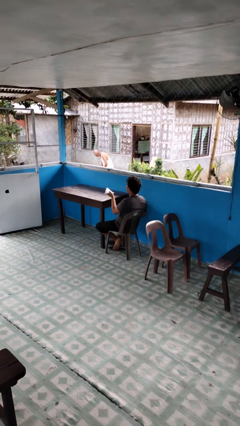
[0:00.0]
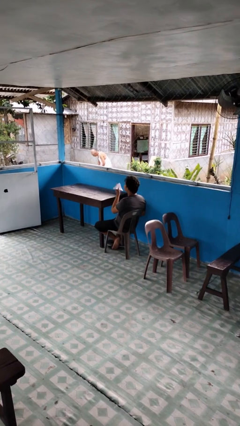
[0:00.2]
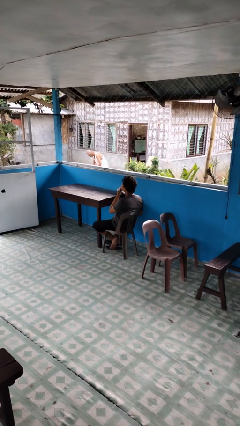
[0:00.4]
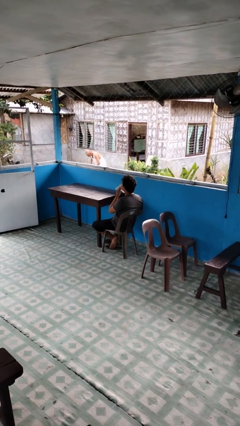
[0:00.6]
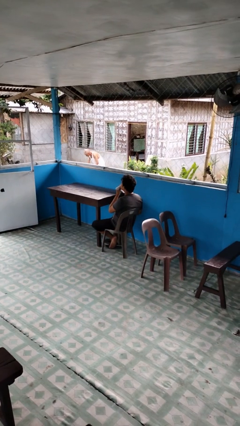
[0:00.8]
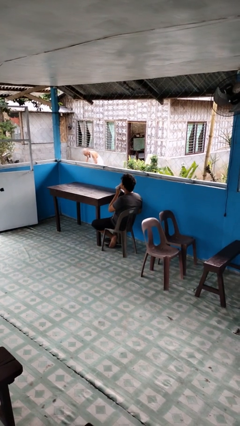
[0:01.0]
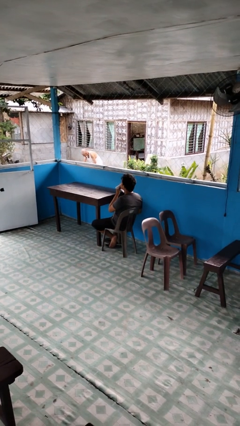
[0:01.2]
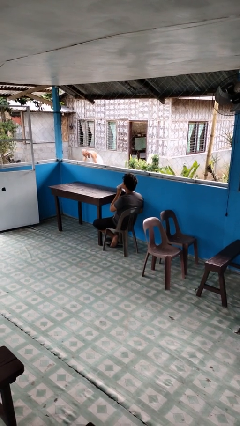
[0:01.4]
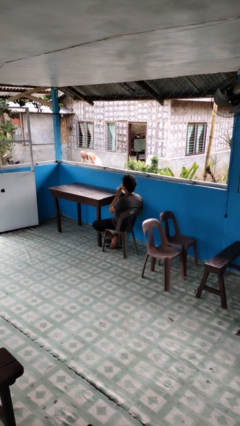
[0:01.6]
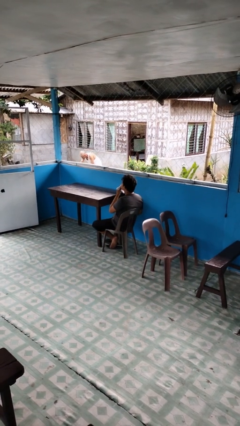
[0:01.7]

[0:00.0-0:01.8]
person wipes mouth with napkin

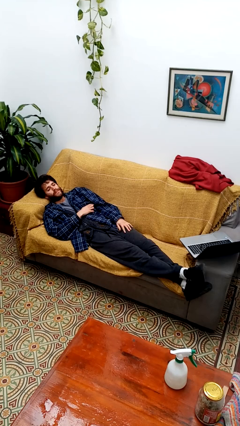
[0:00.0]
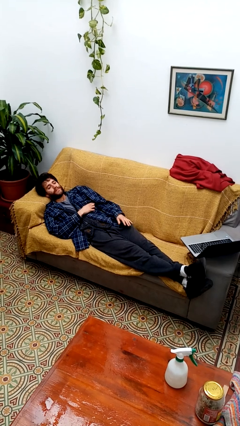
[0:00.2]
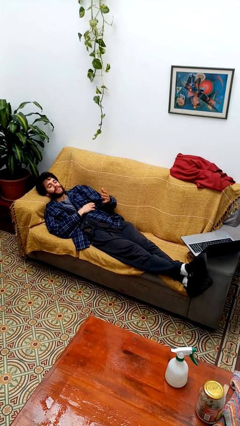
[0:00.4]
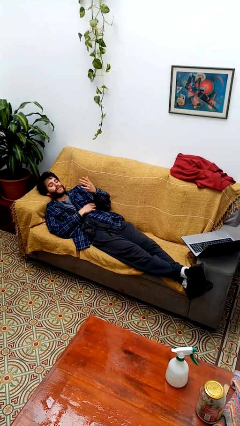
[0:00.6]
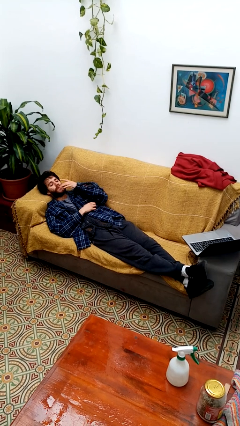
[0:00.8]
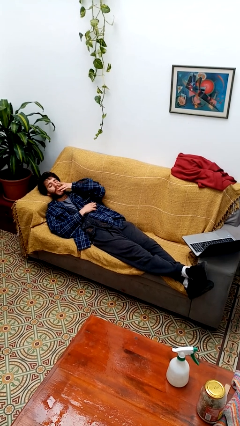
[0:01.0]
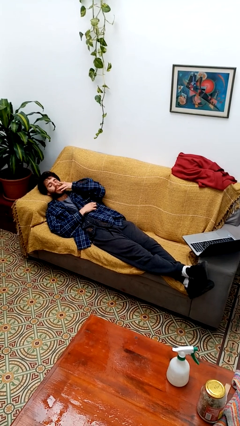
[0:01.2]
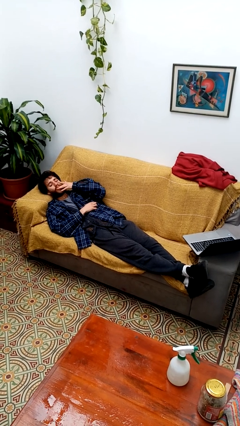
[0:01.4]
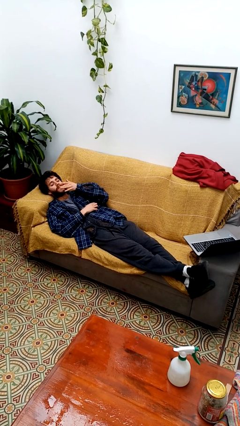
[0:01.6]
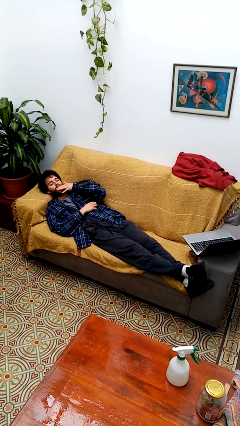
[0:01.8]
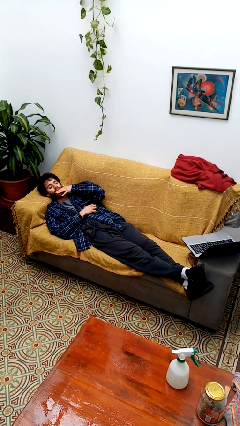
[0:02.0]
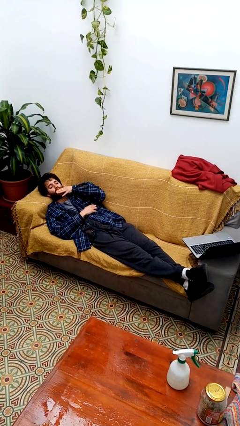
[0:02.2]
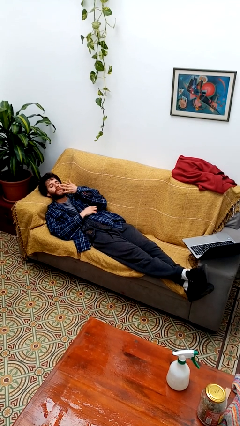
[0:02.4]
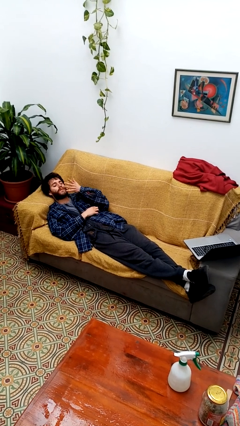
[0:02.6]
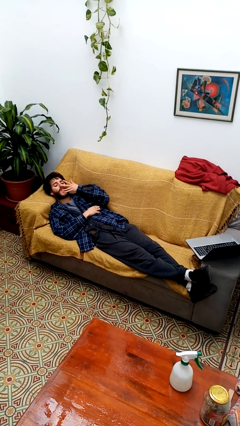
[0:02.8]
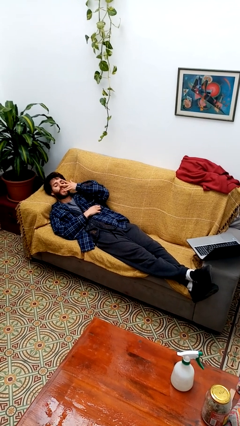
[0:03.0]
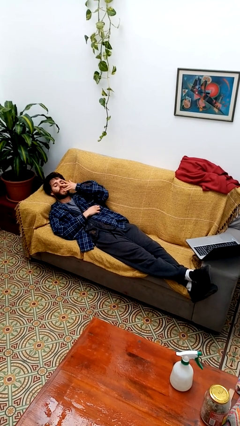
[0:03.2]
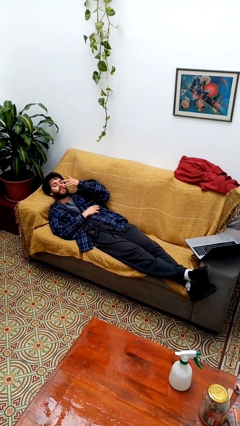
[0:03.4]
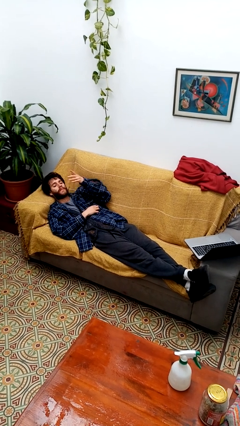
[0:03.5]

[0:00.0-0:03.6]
person licks fingers

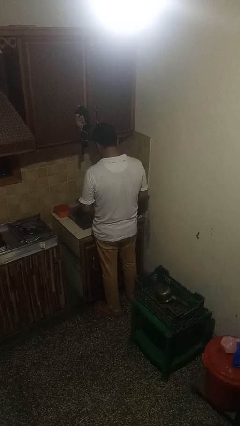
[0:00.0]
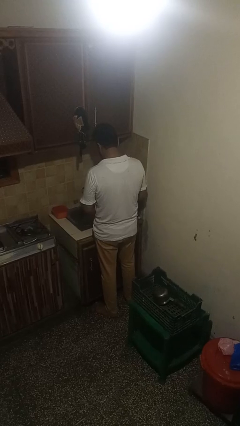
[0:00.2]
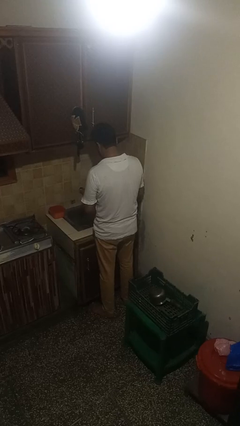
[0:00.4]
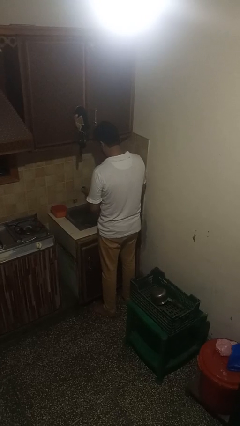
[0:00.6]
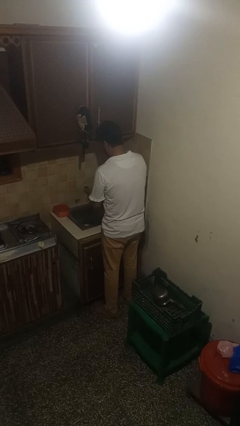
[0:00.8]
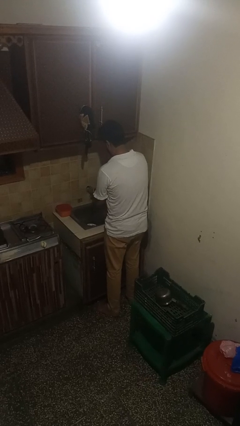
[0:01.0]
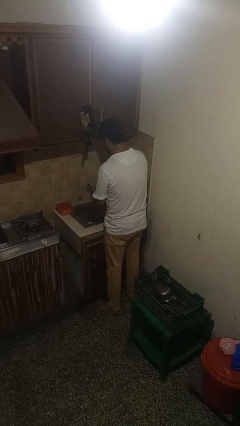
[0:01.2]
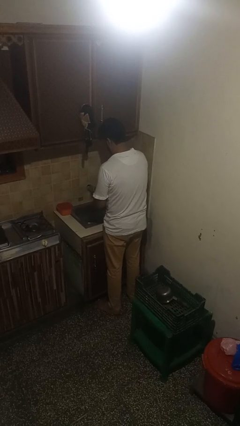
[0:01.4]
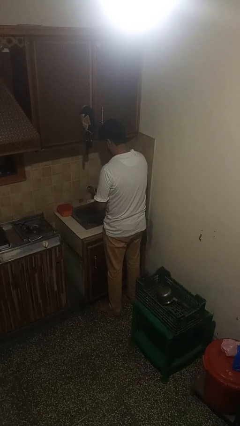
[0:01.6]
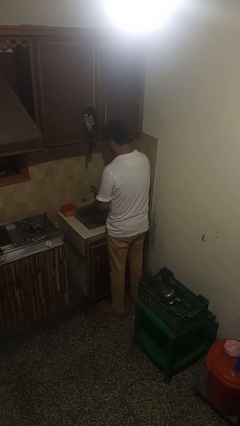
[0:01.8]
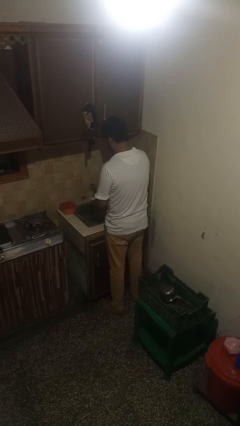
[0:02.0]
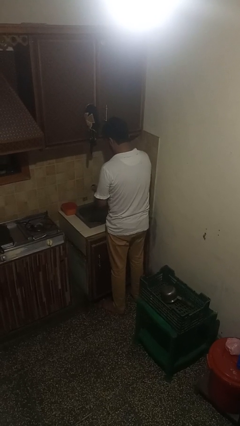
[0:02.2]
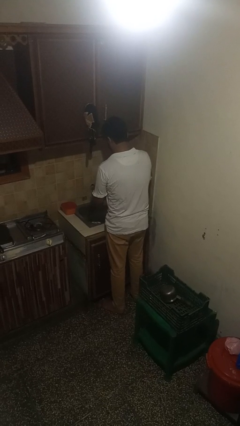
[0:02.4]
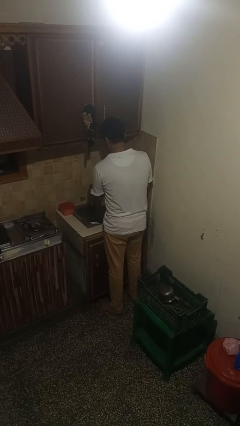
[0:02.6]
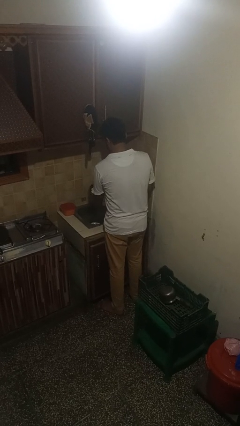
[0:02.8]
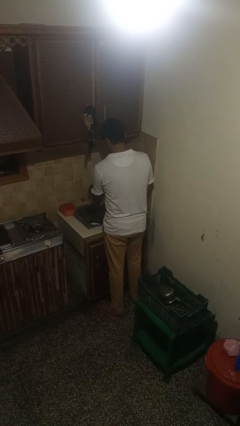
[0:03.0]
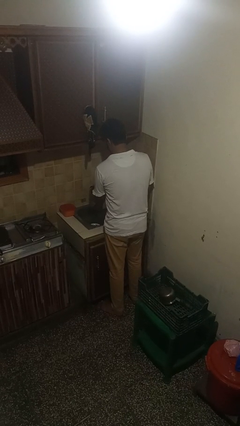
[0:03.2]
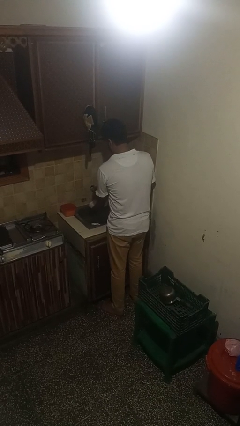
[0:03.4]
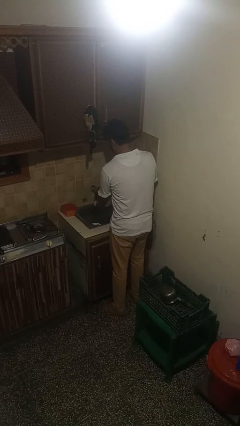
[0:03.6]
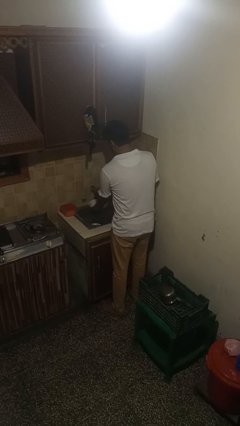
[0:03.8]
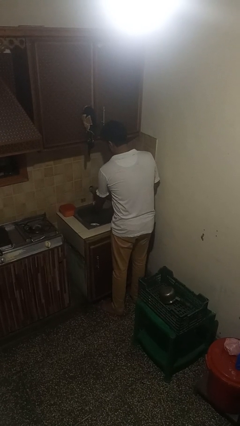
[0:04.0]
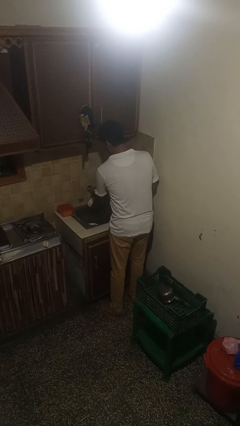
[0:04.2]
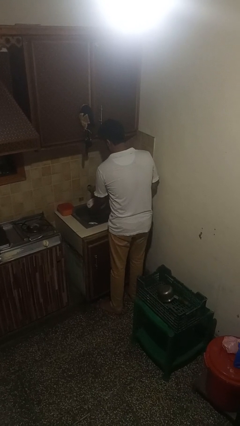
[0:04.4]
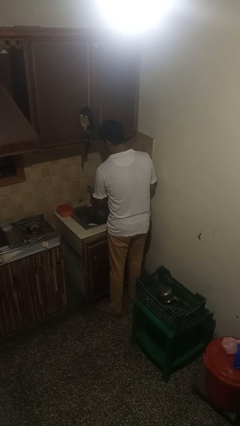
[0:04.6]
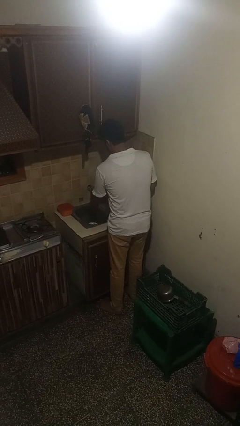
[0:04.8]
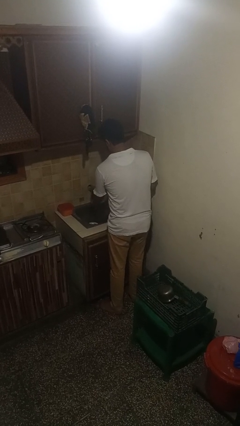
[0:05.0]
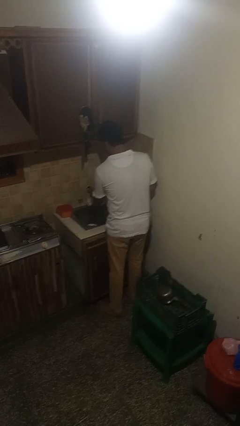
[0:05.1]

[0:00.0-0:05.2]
person washes dish

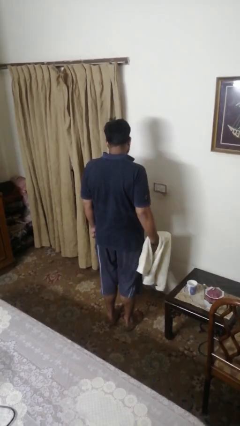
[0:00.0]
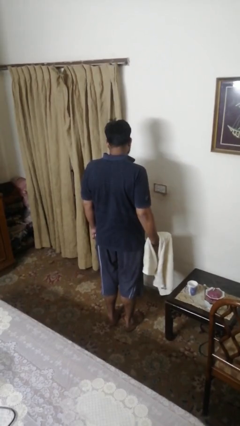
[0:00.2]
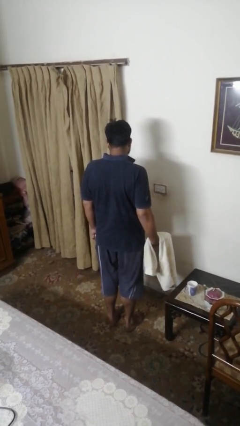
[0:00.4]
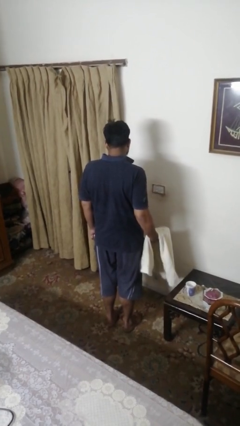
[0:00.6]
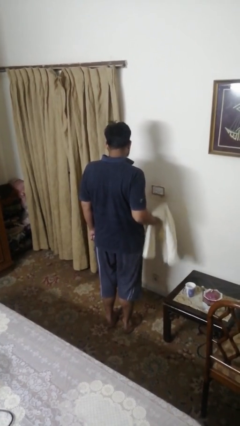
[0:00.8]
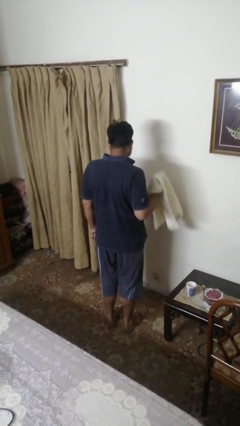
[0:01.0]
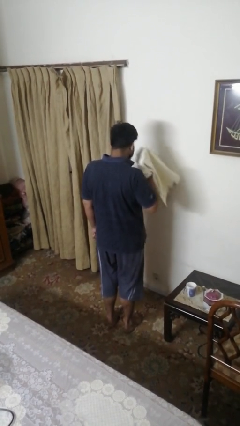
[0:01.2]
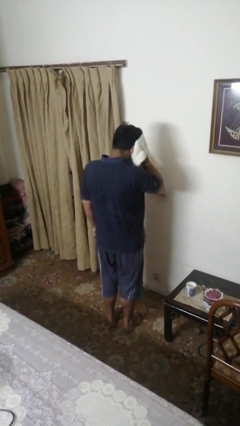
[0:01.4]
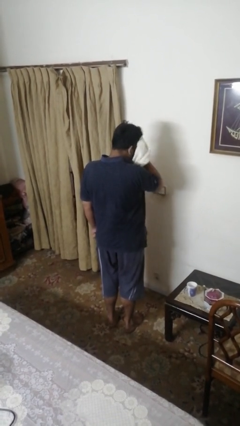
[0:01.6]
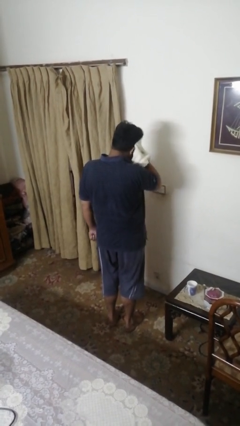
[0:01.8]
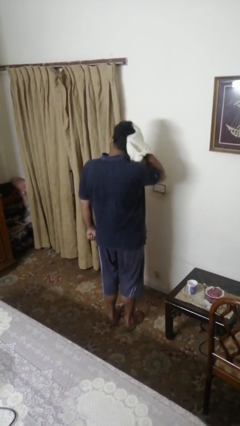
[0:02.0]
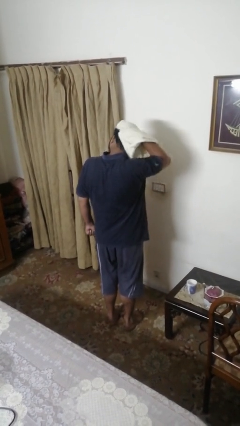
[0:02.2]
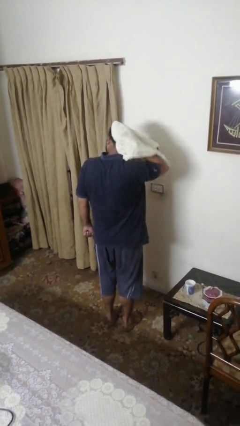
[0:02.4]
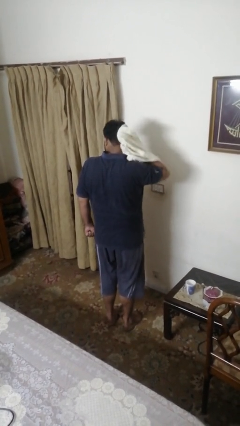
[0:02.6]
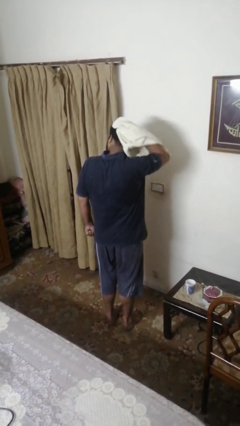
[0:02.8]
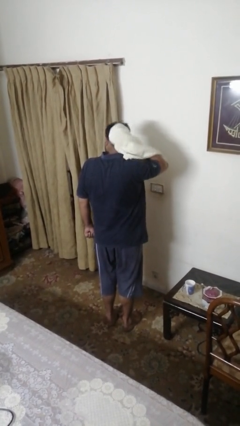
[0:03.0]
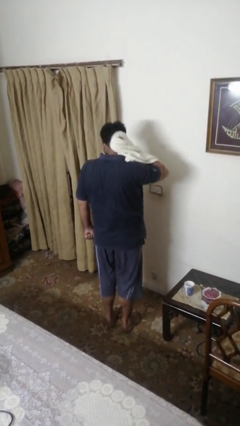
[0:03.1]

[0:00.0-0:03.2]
person dries hair with towel

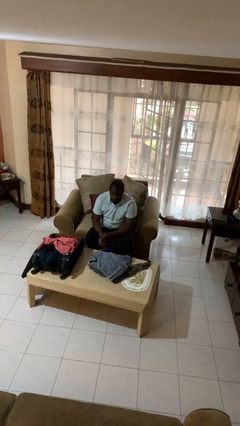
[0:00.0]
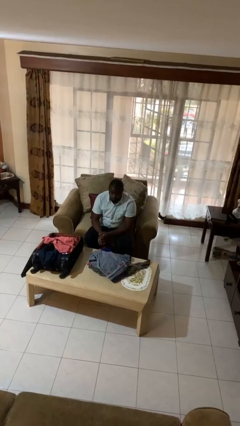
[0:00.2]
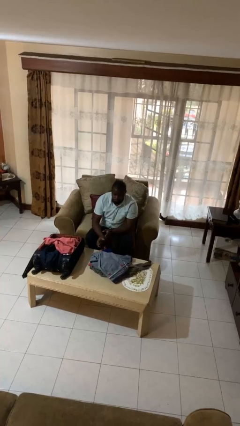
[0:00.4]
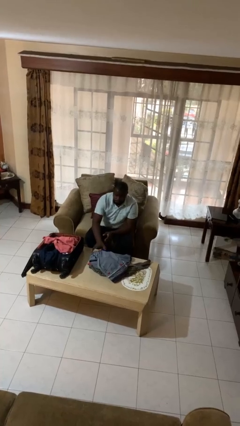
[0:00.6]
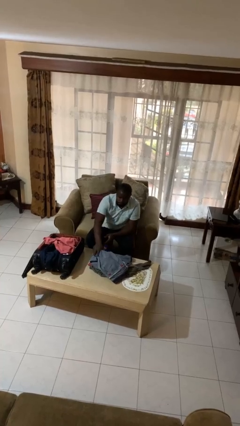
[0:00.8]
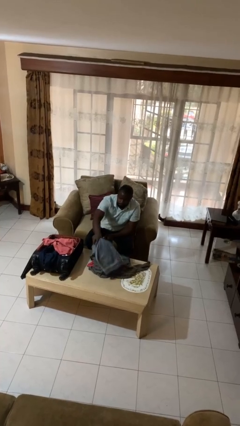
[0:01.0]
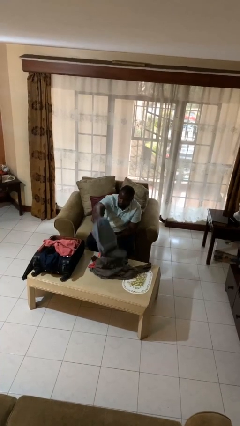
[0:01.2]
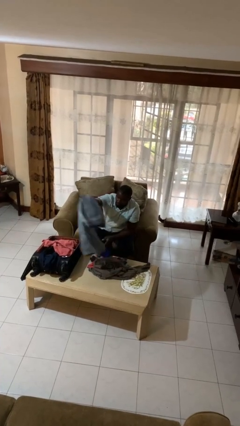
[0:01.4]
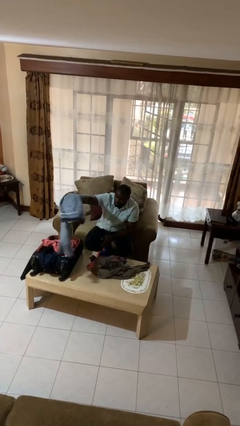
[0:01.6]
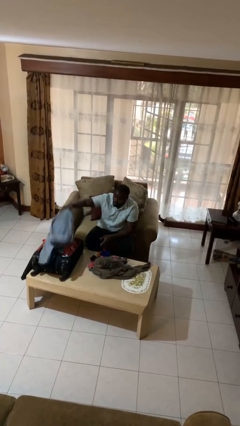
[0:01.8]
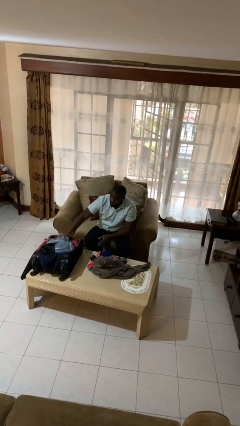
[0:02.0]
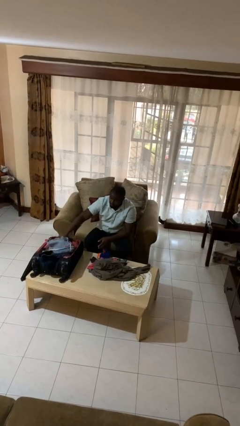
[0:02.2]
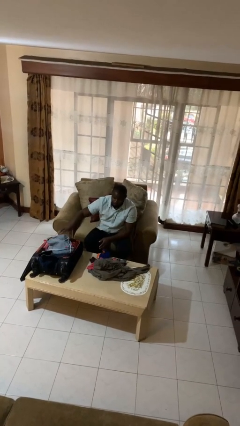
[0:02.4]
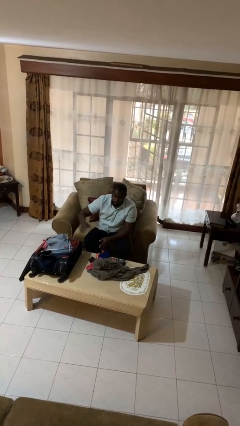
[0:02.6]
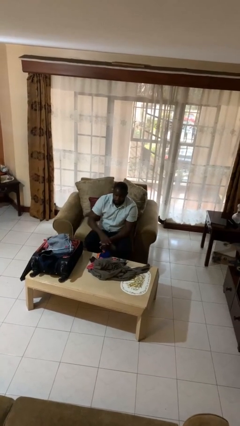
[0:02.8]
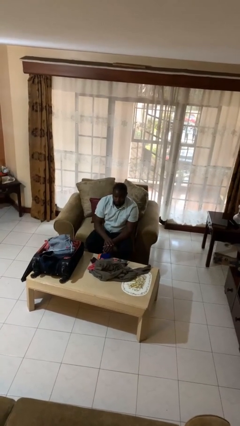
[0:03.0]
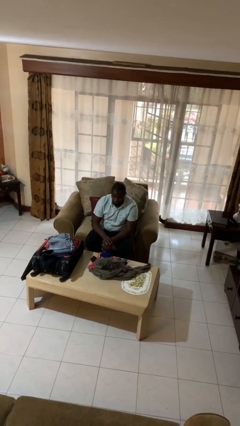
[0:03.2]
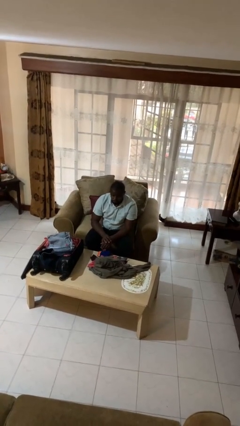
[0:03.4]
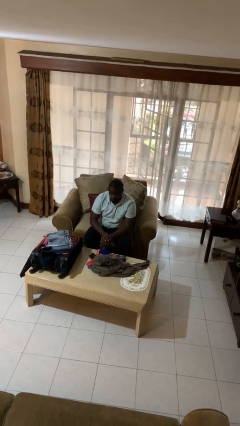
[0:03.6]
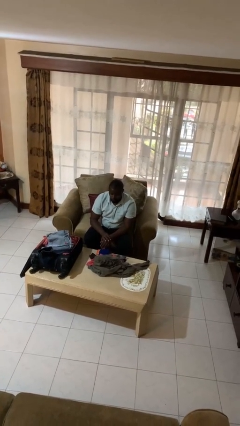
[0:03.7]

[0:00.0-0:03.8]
person loads clothes into suitcase

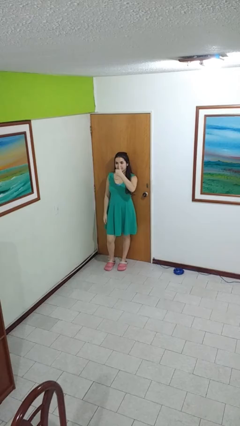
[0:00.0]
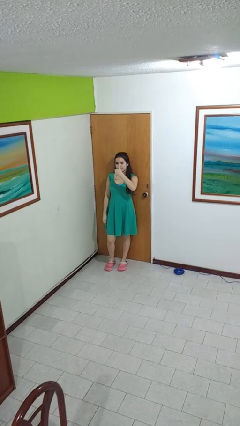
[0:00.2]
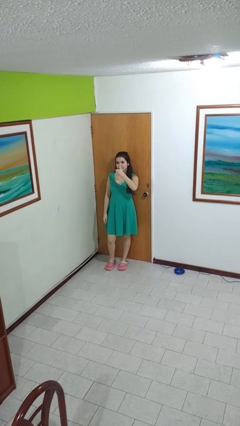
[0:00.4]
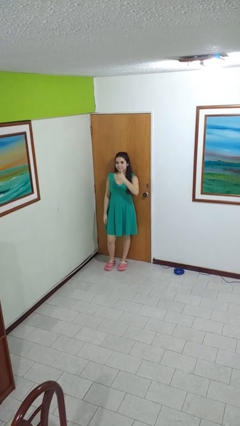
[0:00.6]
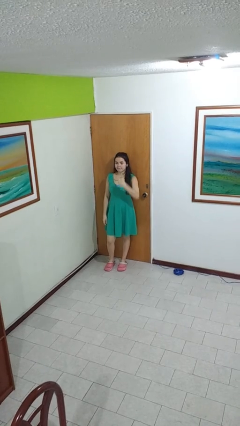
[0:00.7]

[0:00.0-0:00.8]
person gestures thumbs up
